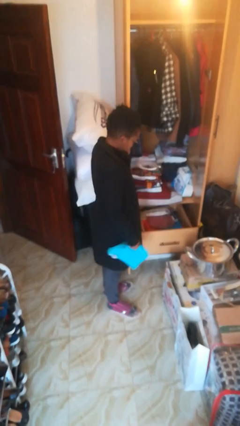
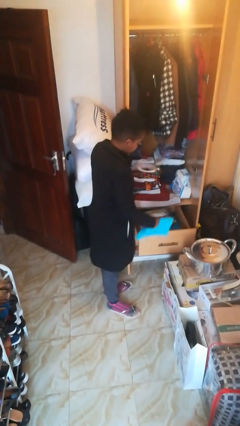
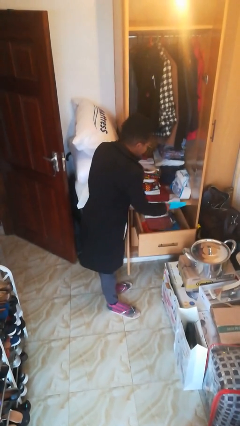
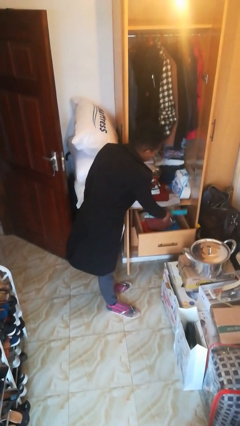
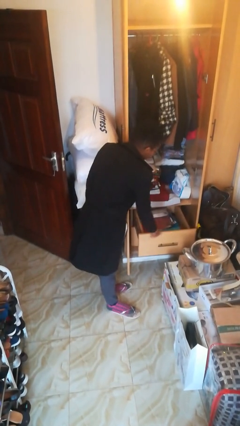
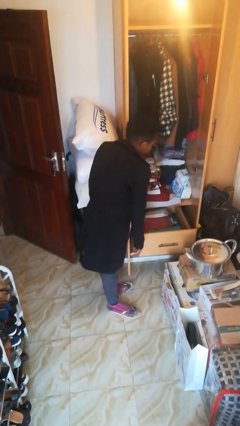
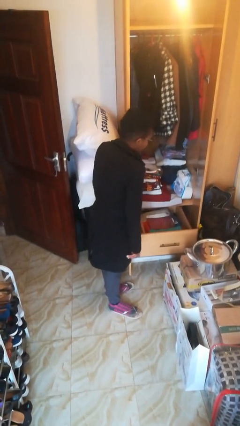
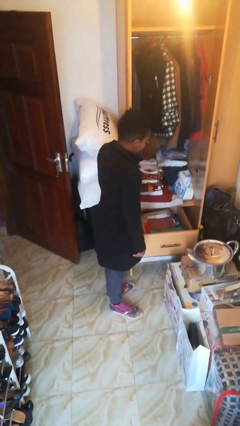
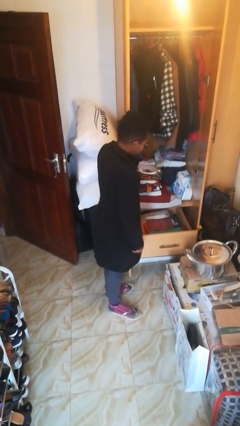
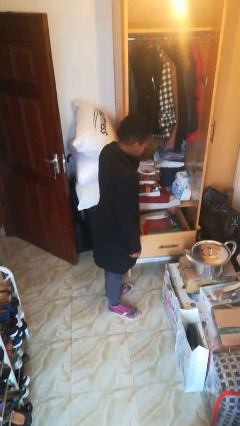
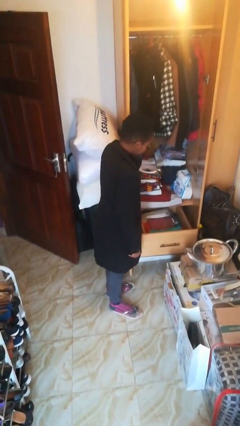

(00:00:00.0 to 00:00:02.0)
person puts clothes into dresser

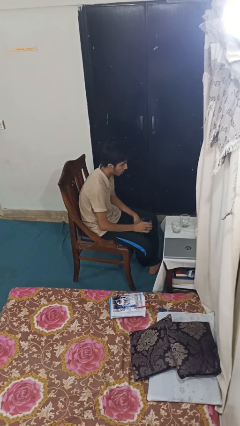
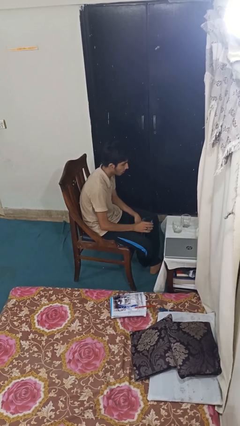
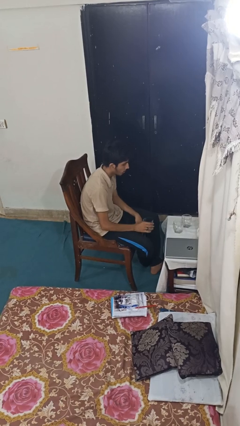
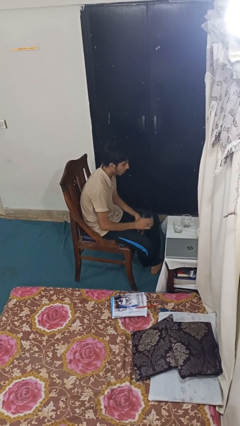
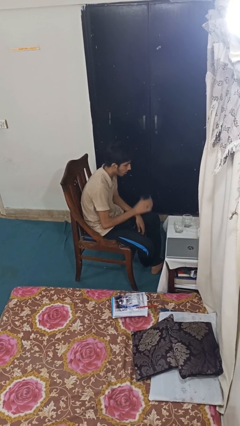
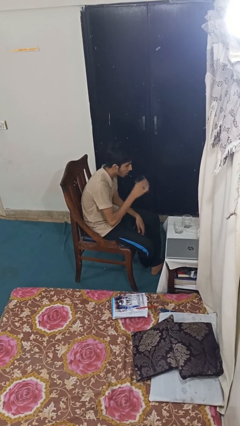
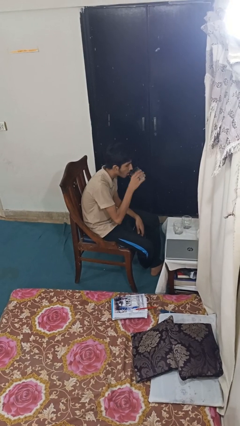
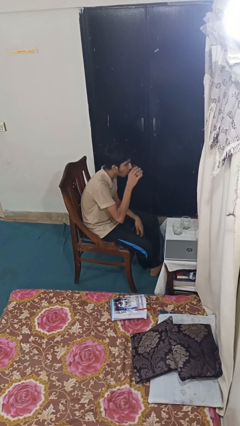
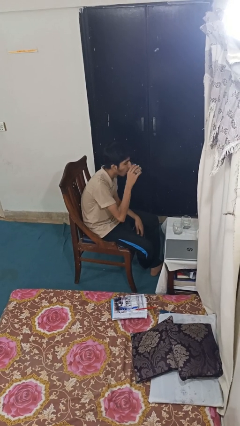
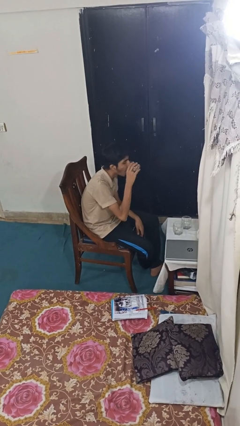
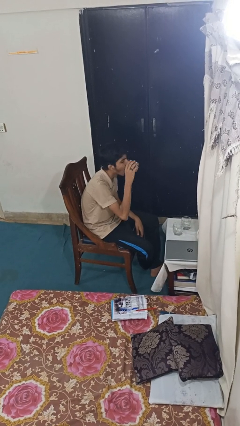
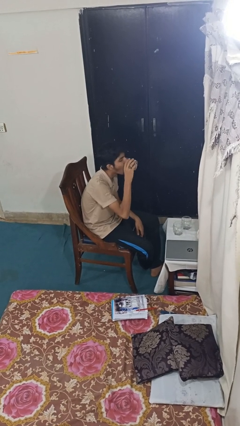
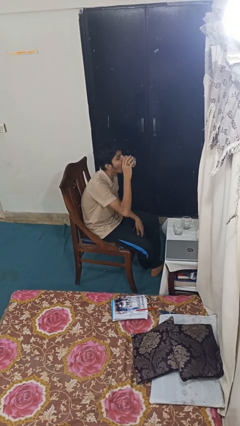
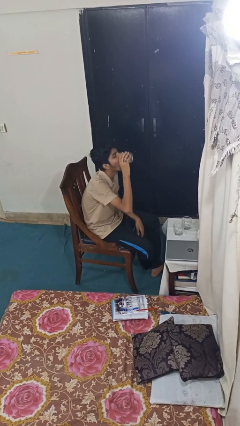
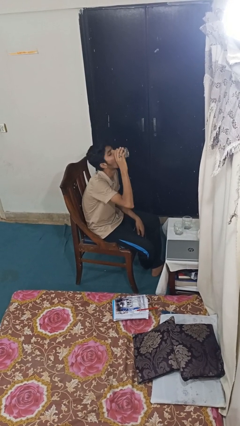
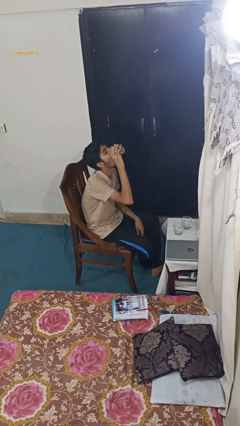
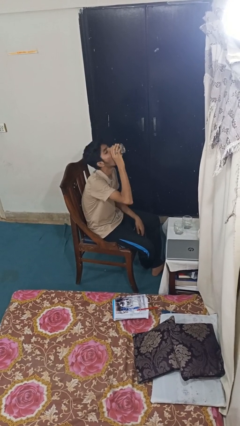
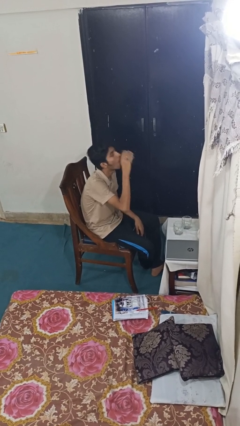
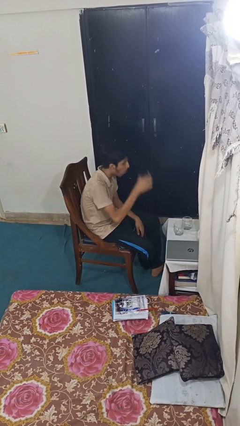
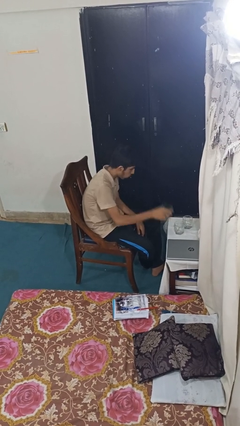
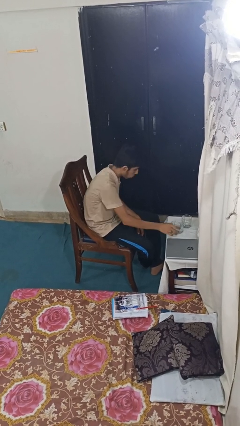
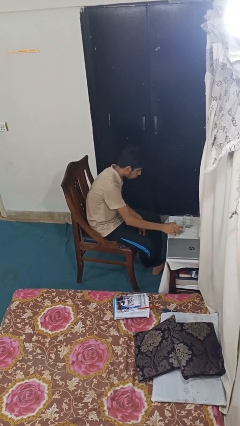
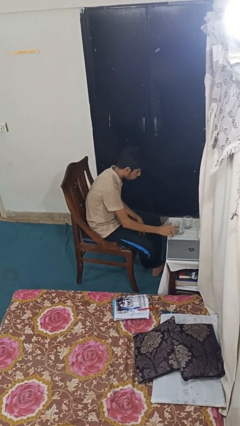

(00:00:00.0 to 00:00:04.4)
person drinks from shotglass

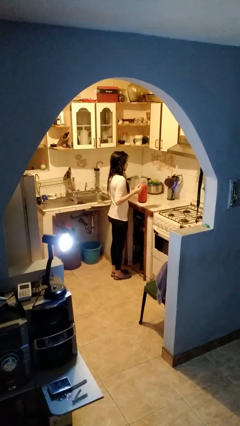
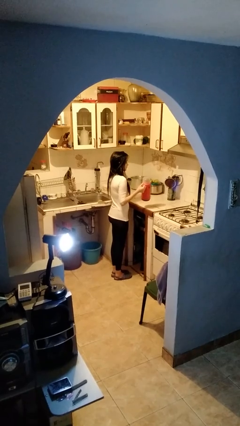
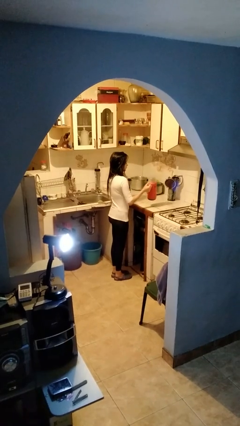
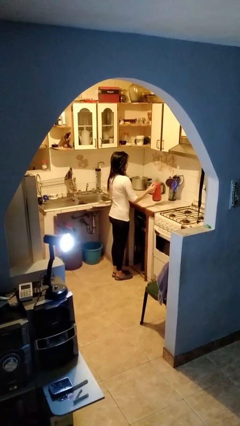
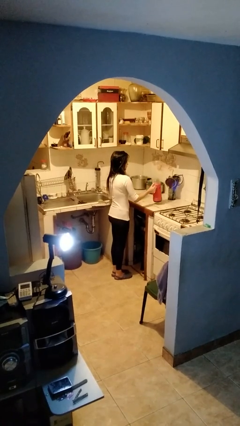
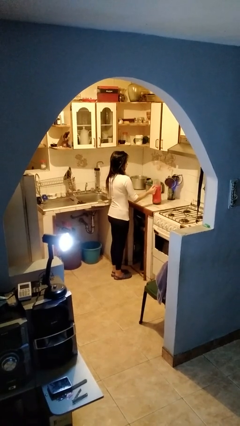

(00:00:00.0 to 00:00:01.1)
person puts down object on countertop

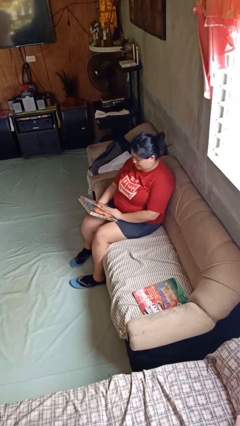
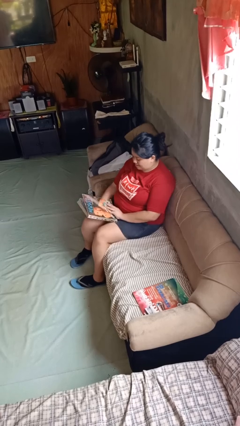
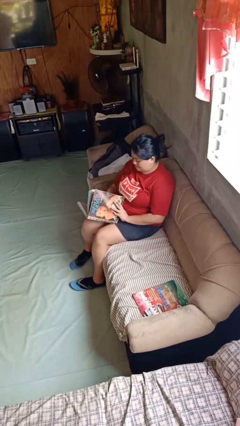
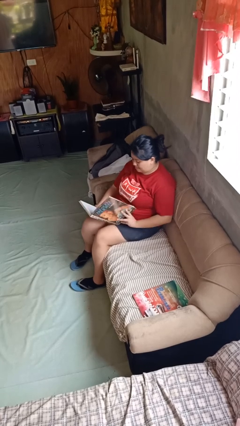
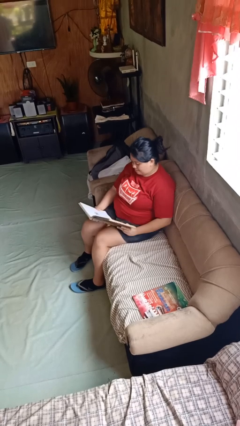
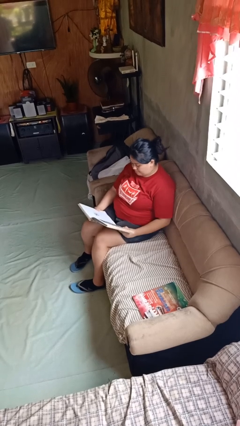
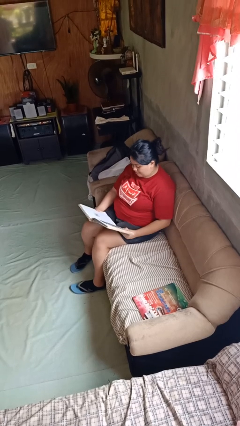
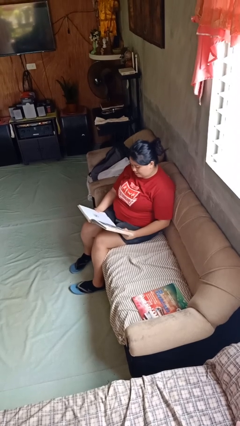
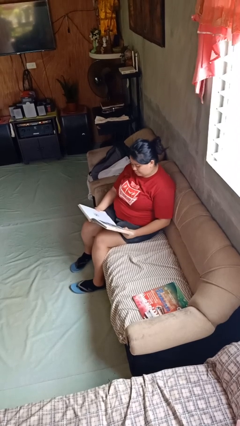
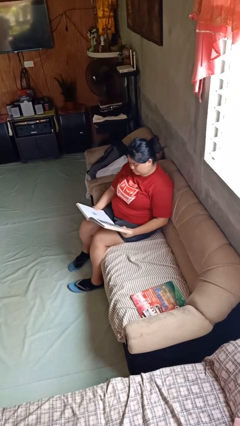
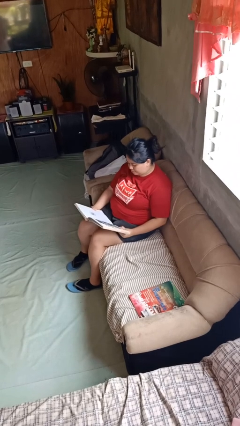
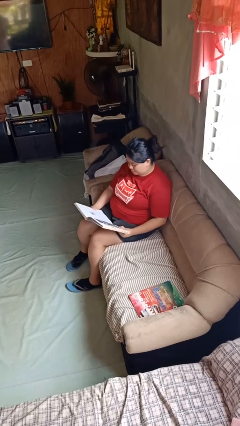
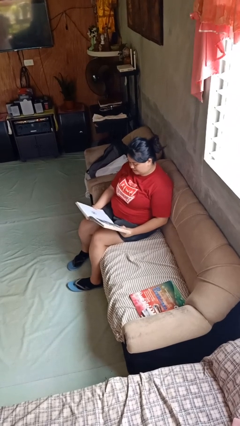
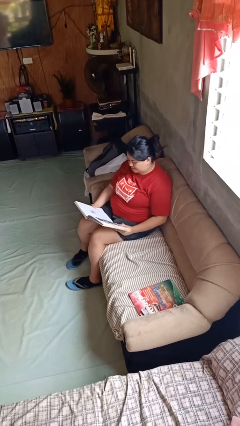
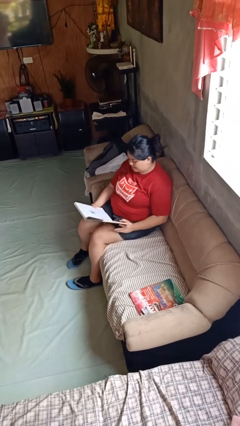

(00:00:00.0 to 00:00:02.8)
person reads book

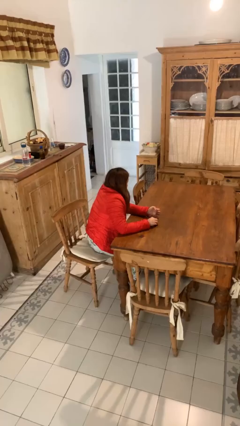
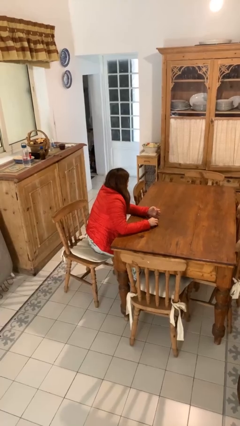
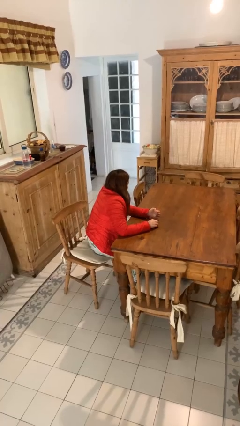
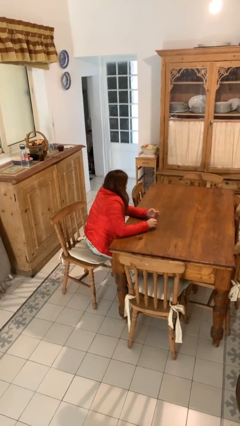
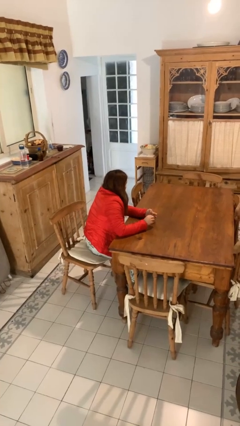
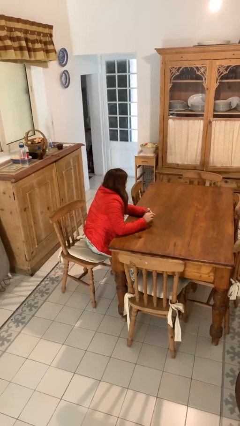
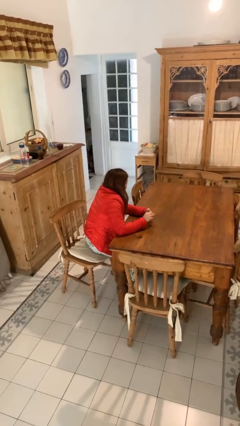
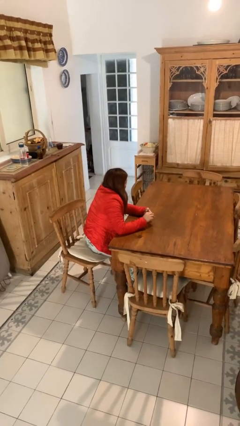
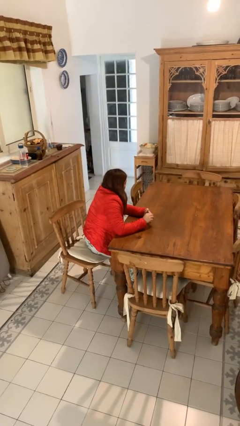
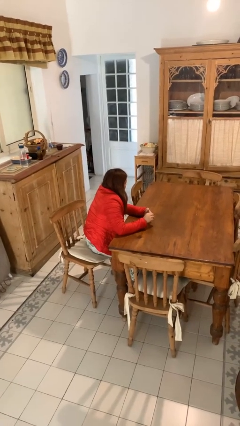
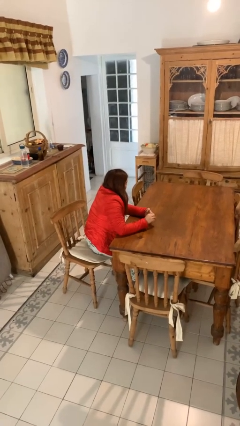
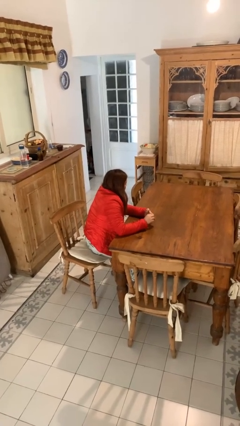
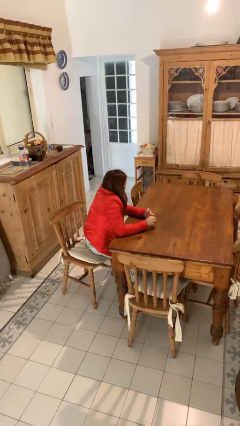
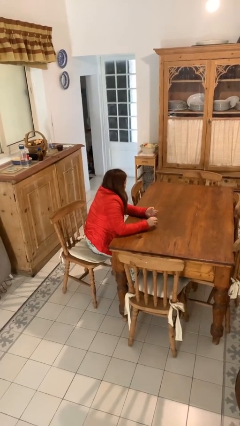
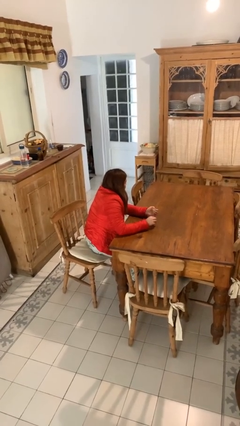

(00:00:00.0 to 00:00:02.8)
person files fingernails

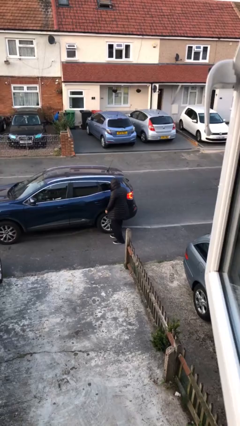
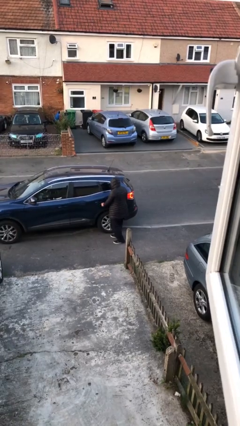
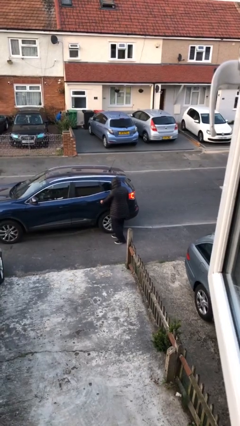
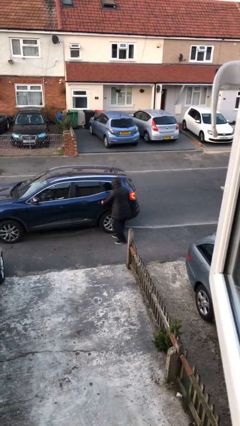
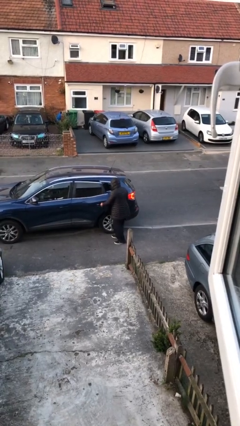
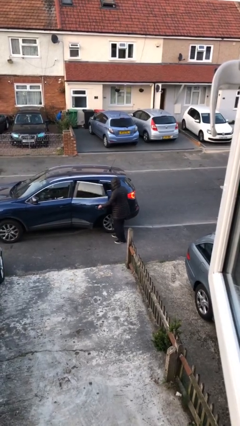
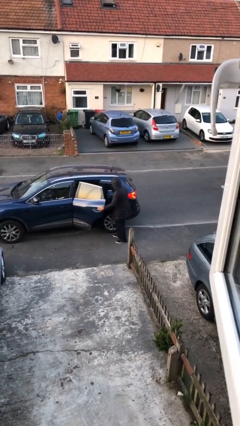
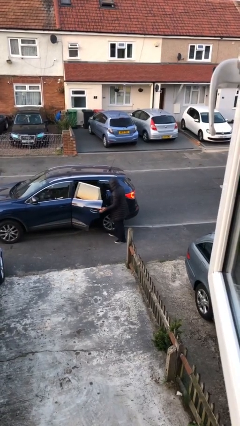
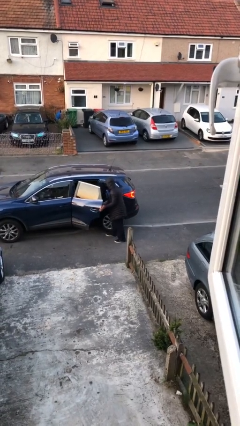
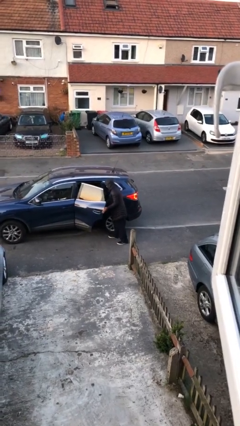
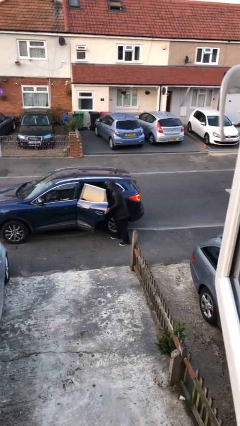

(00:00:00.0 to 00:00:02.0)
person opens car door

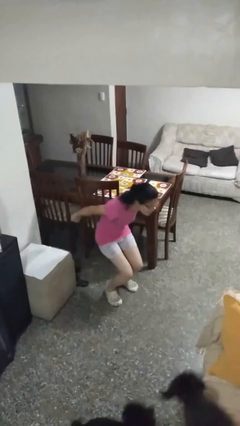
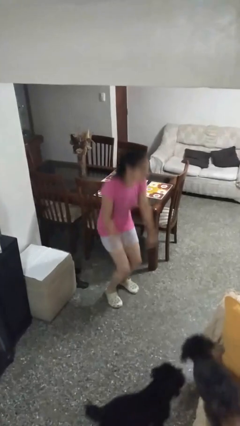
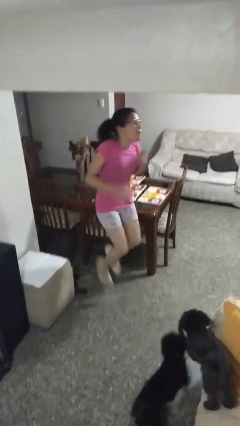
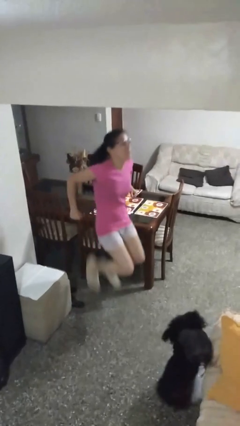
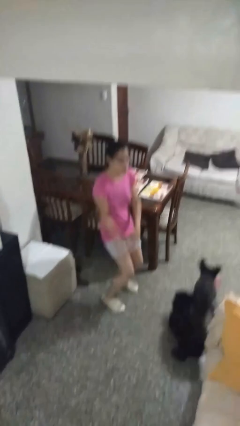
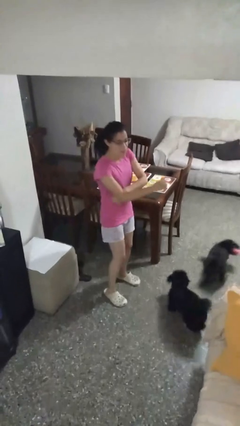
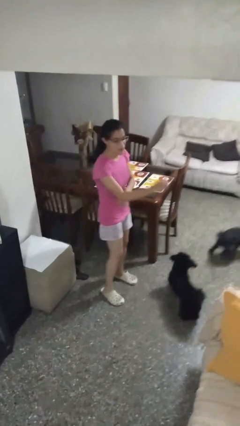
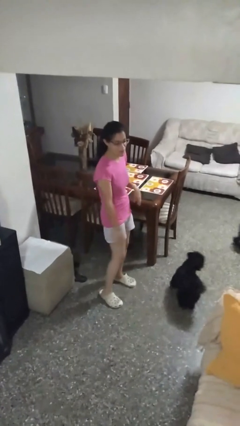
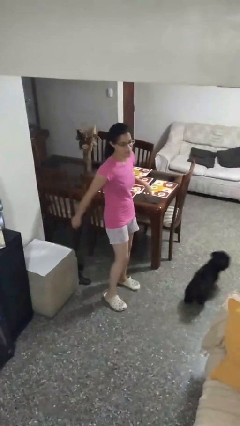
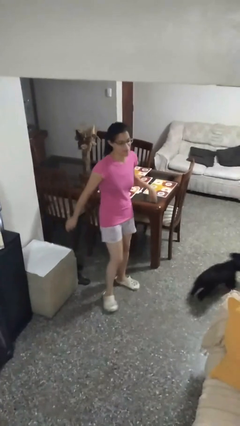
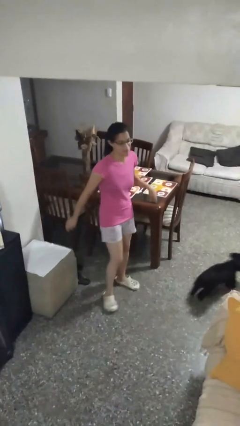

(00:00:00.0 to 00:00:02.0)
person jumps

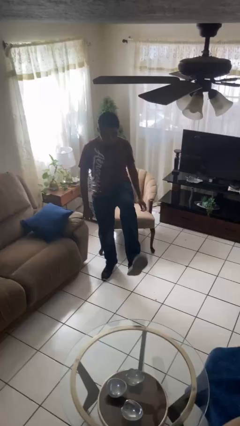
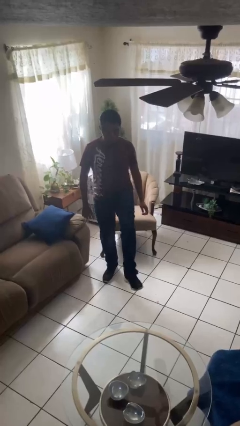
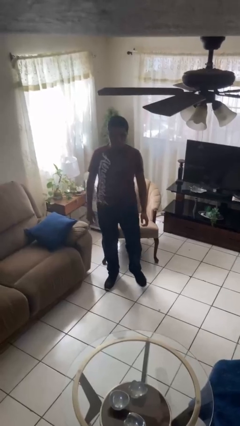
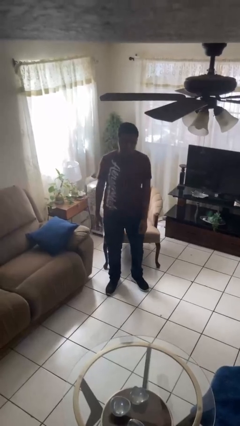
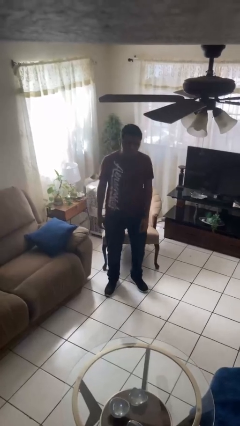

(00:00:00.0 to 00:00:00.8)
person karate kicks
